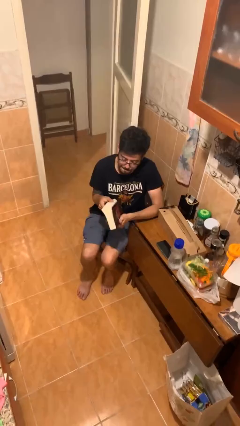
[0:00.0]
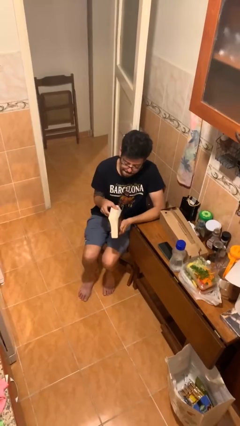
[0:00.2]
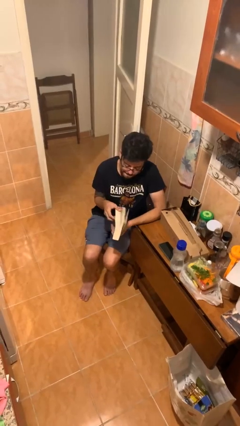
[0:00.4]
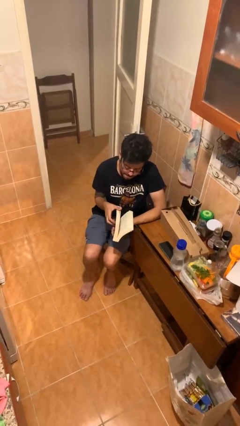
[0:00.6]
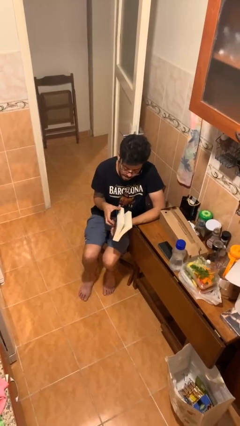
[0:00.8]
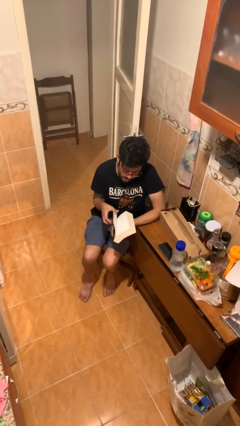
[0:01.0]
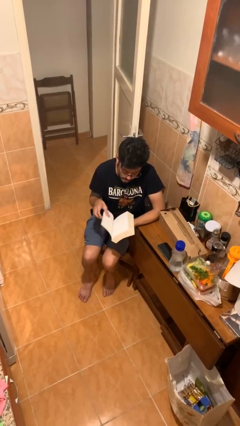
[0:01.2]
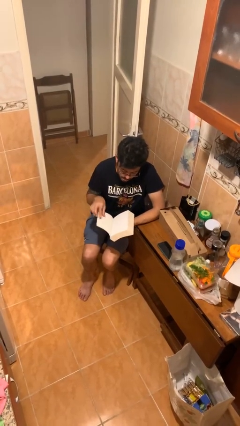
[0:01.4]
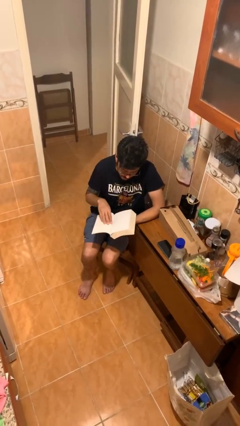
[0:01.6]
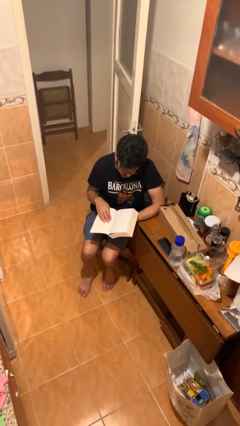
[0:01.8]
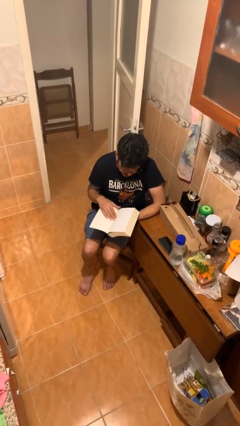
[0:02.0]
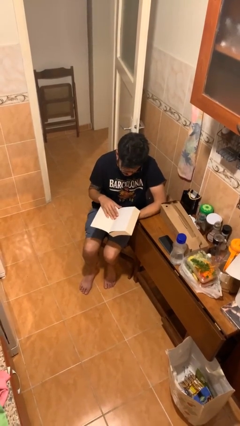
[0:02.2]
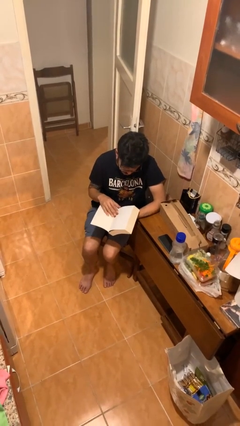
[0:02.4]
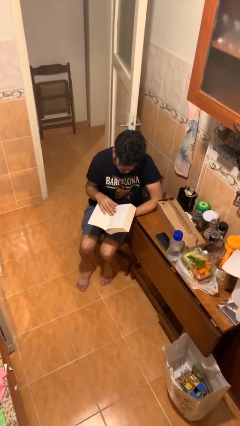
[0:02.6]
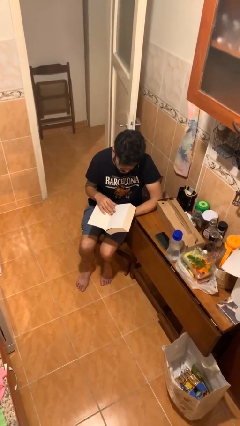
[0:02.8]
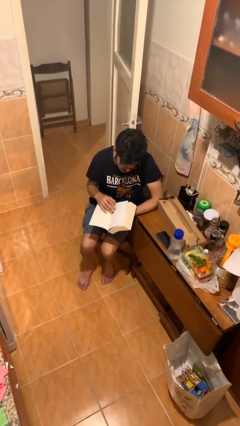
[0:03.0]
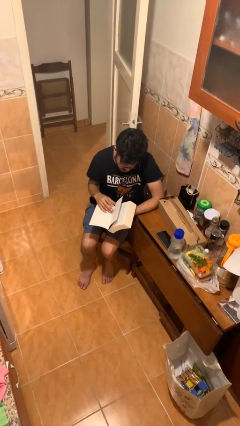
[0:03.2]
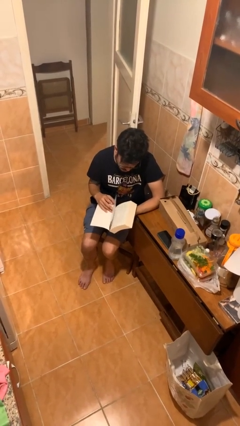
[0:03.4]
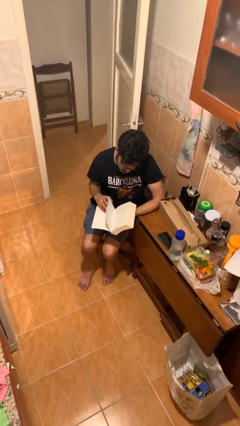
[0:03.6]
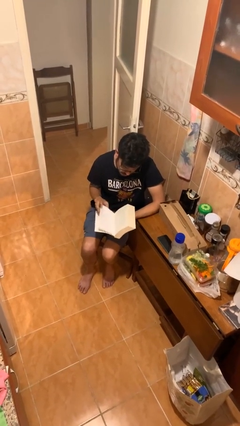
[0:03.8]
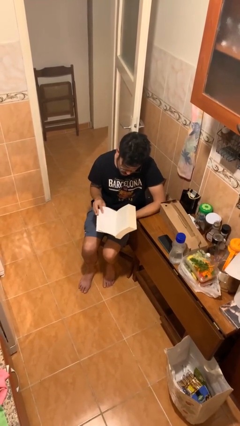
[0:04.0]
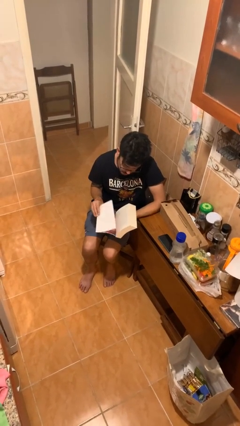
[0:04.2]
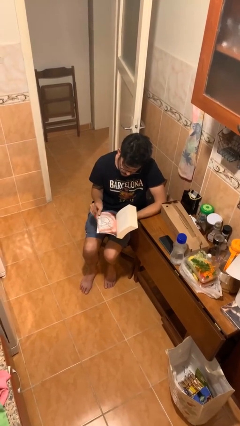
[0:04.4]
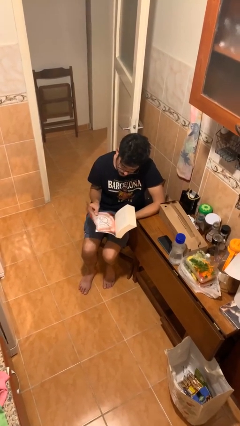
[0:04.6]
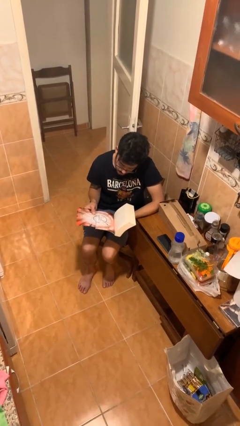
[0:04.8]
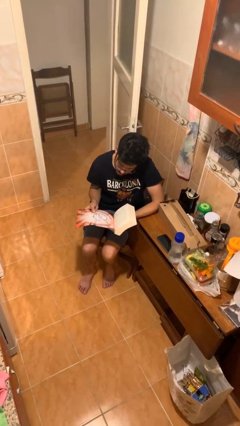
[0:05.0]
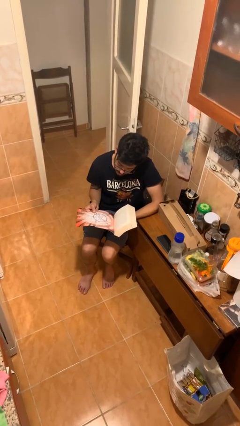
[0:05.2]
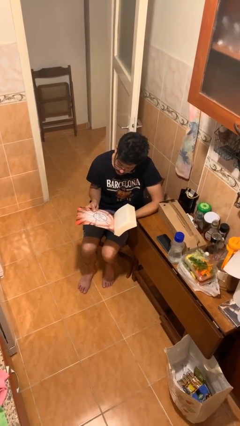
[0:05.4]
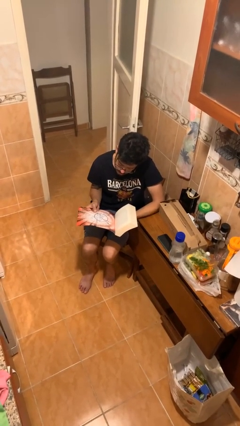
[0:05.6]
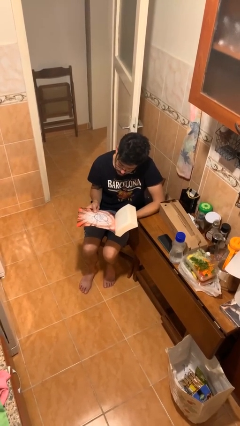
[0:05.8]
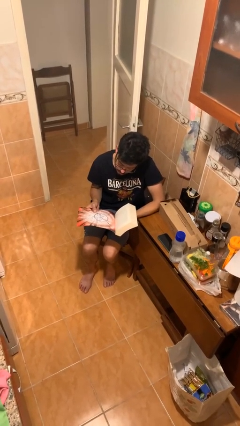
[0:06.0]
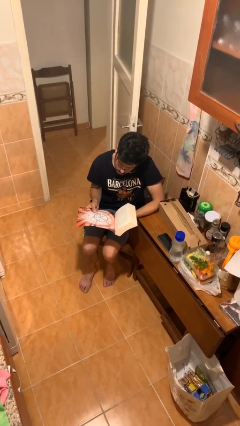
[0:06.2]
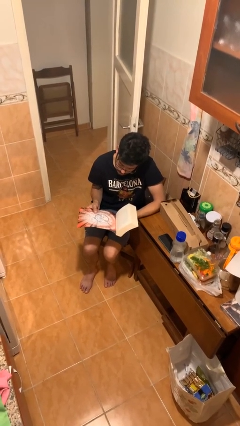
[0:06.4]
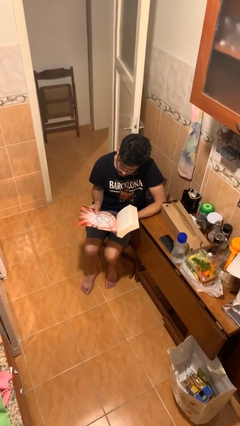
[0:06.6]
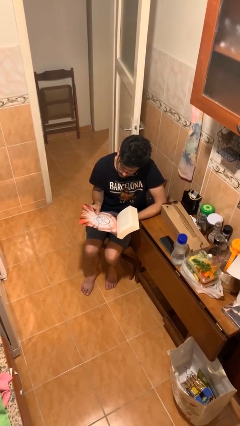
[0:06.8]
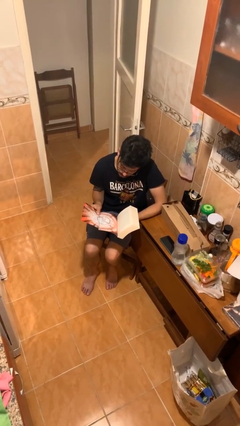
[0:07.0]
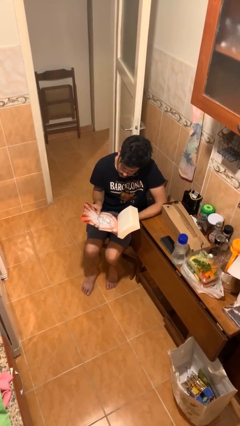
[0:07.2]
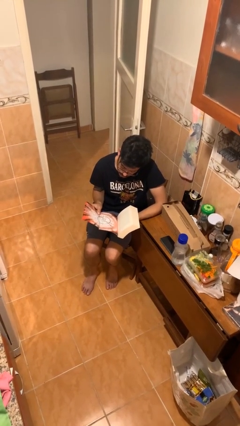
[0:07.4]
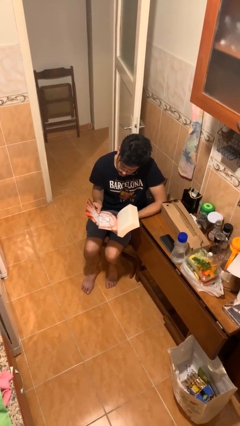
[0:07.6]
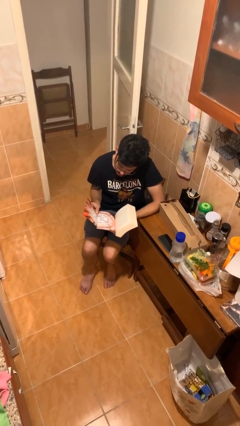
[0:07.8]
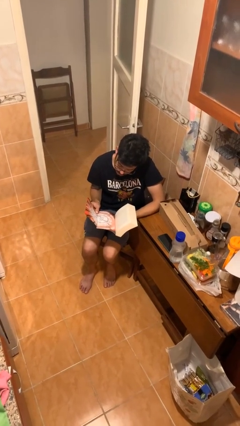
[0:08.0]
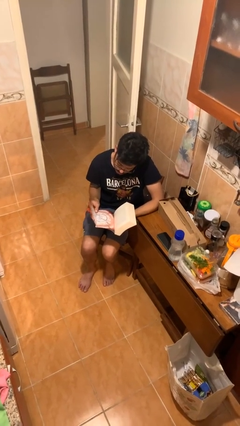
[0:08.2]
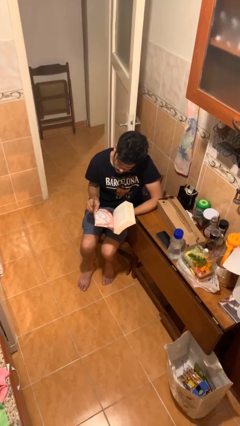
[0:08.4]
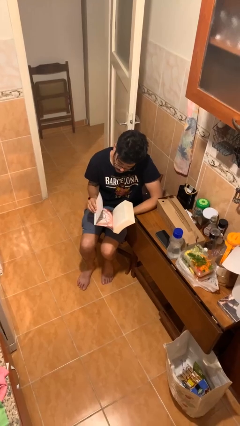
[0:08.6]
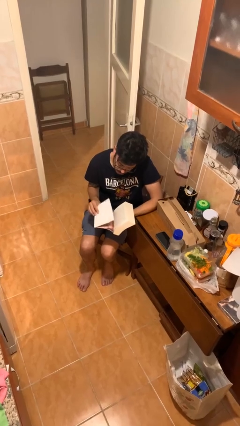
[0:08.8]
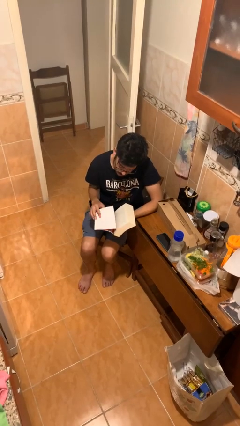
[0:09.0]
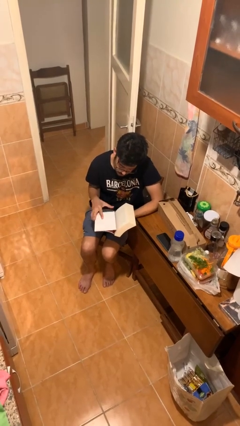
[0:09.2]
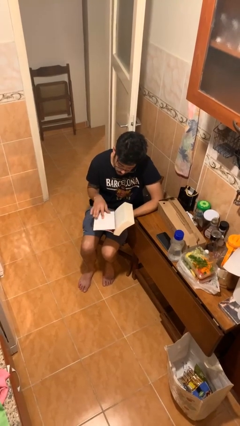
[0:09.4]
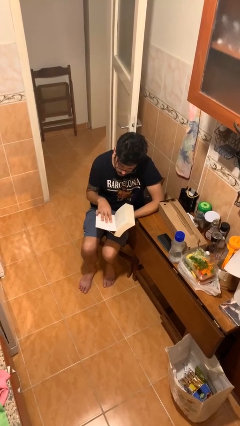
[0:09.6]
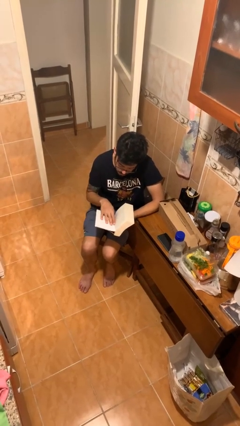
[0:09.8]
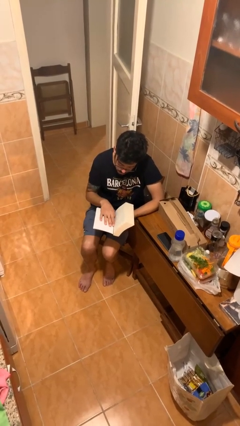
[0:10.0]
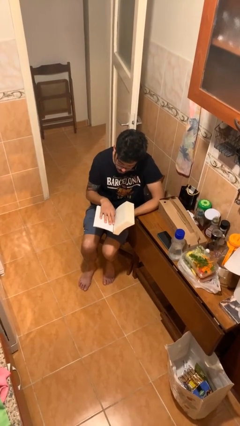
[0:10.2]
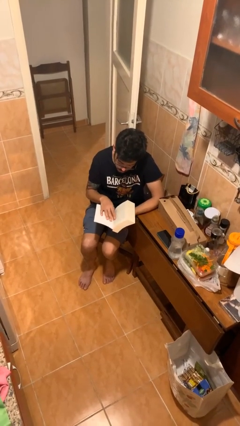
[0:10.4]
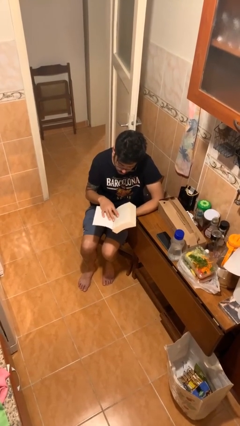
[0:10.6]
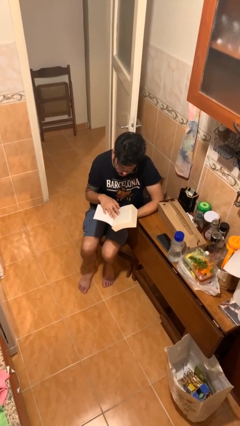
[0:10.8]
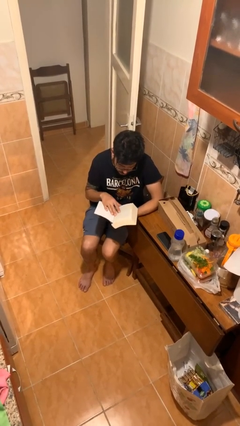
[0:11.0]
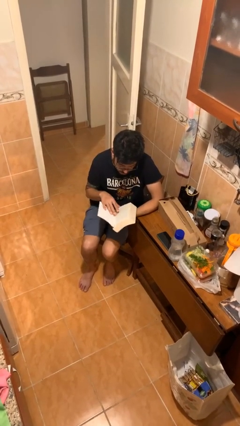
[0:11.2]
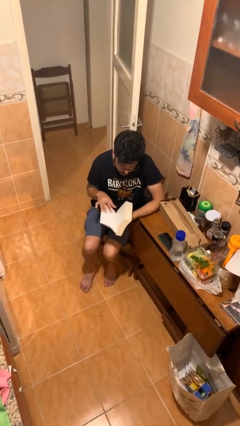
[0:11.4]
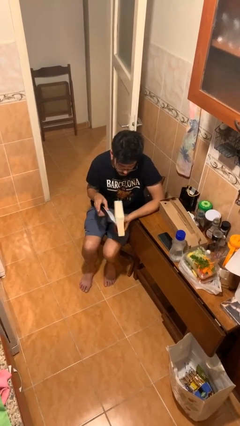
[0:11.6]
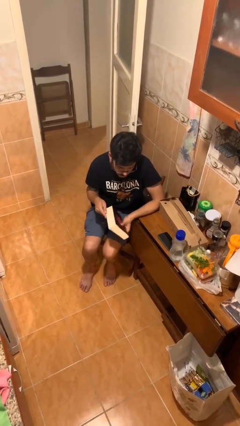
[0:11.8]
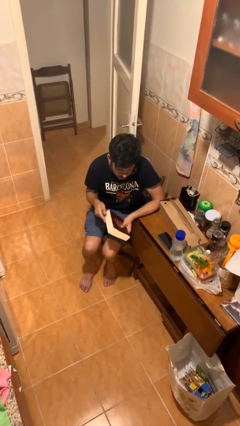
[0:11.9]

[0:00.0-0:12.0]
person reads document

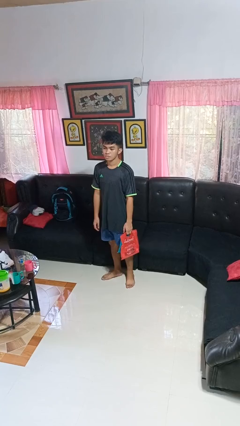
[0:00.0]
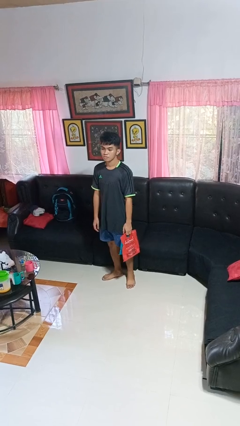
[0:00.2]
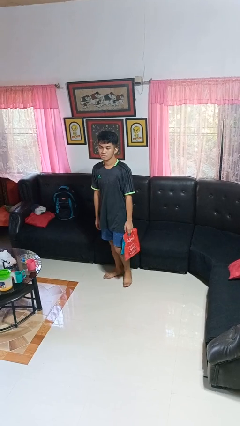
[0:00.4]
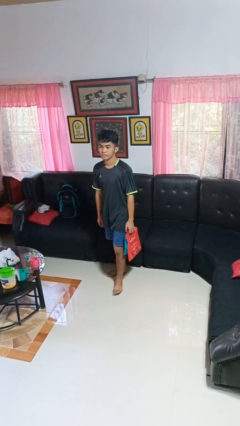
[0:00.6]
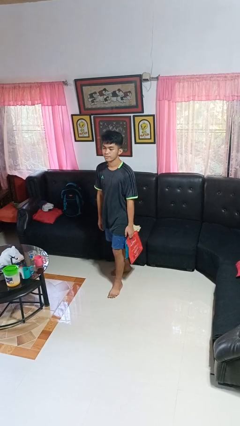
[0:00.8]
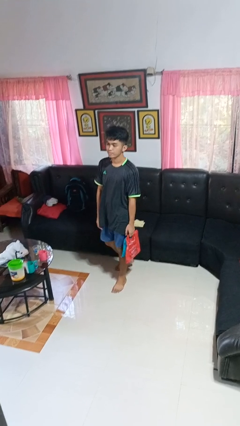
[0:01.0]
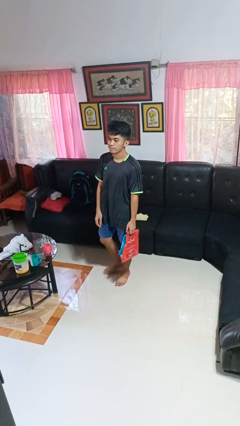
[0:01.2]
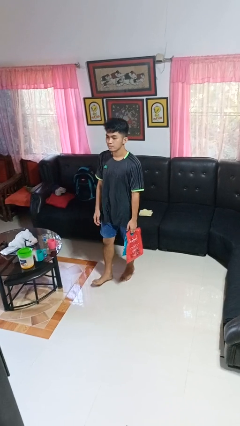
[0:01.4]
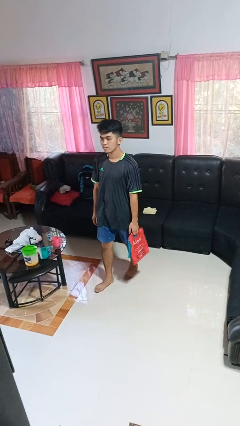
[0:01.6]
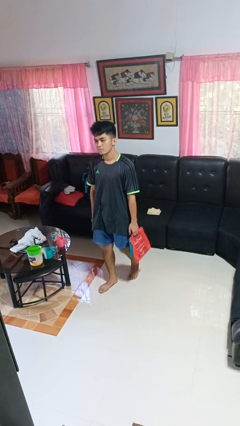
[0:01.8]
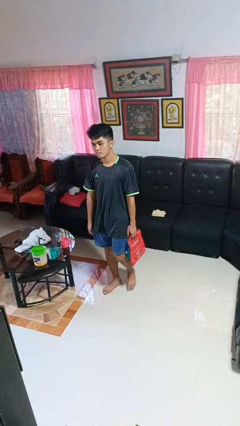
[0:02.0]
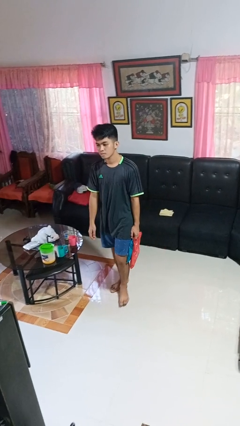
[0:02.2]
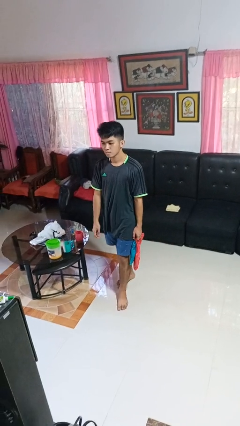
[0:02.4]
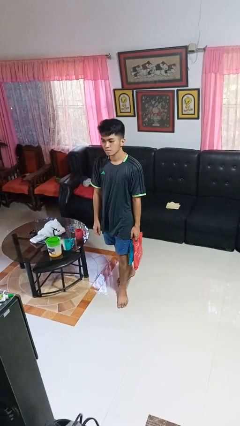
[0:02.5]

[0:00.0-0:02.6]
person carries groceries

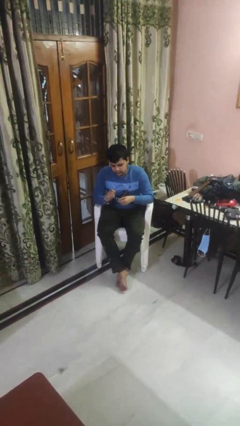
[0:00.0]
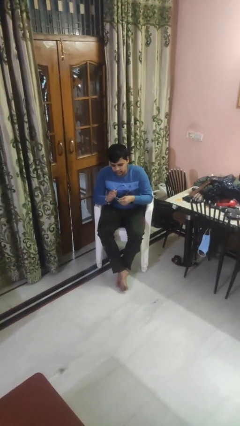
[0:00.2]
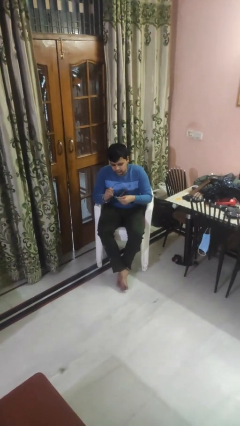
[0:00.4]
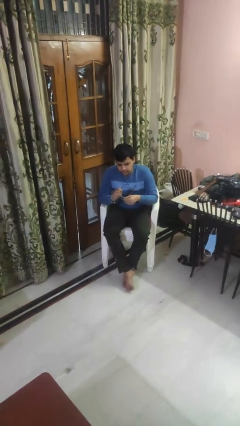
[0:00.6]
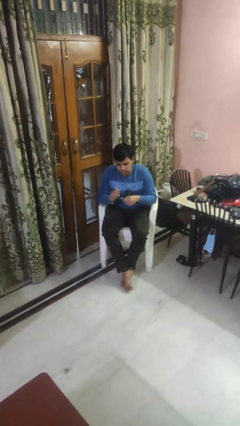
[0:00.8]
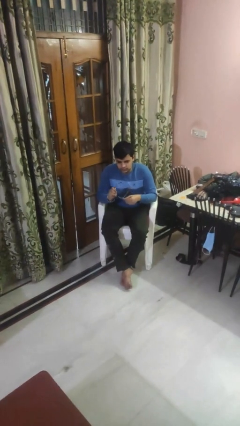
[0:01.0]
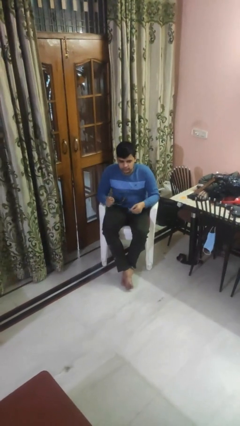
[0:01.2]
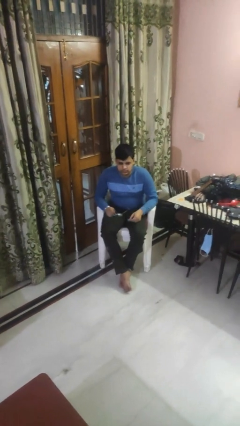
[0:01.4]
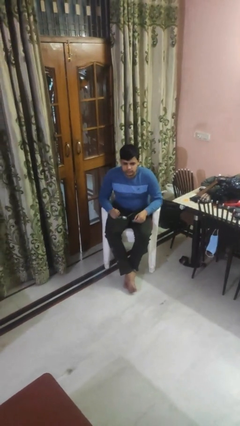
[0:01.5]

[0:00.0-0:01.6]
person cleans eyeglasses

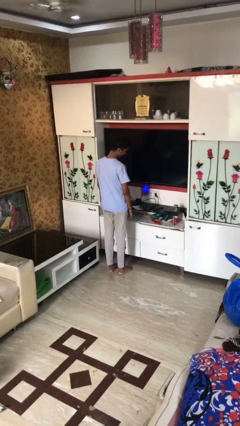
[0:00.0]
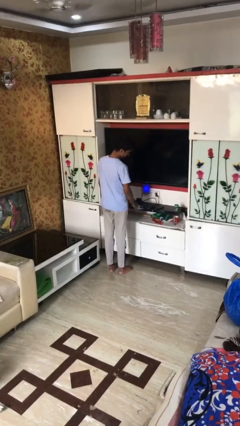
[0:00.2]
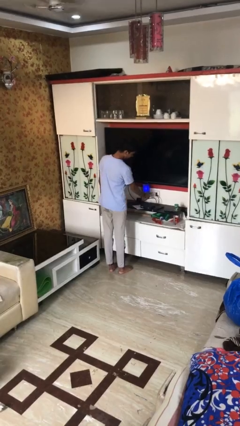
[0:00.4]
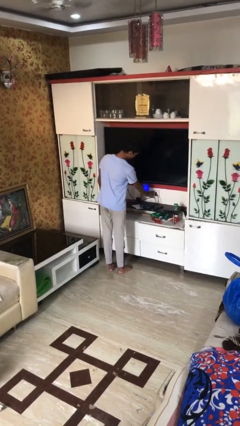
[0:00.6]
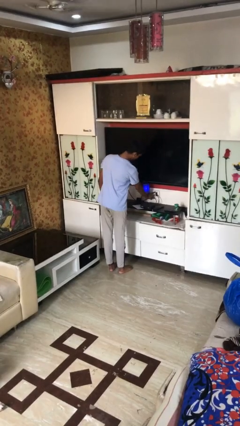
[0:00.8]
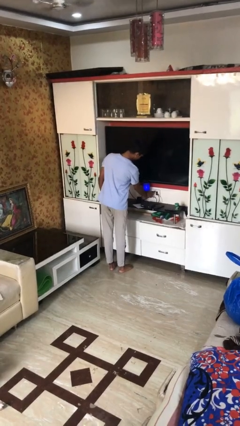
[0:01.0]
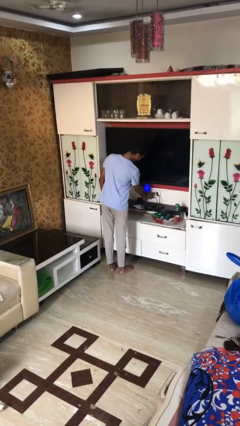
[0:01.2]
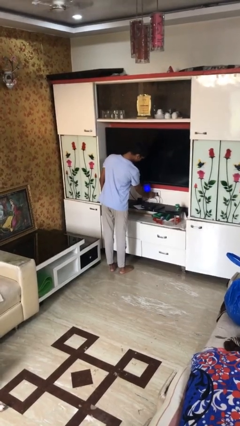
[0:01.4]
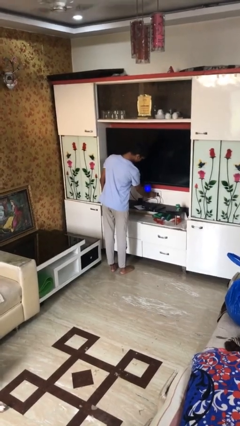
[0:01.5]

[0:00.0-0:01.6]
person turns off lamp
